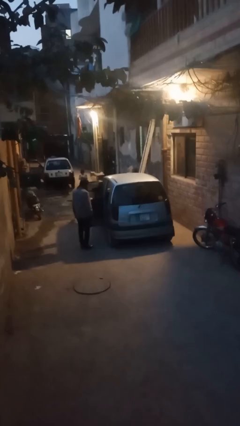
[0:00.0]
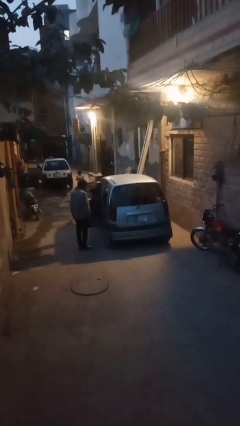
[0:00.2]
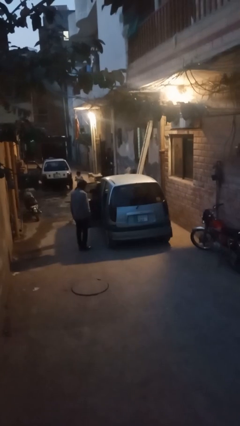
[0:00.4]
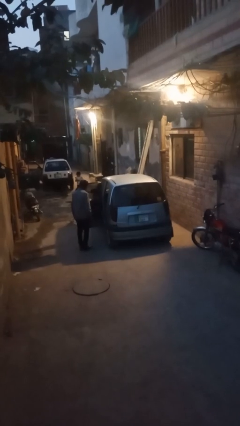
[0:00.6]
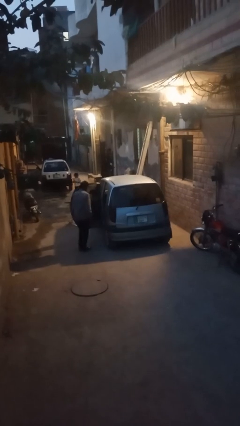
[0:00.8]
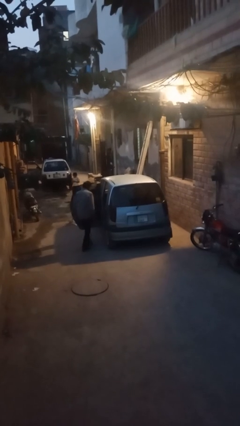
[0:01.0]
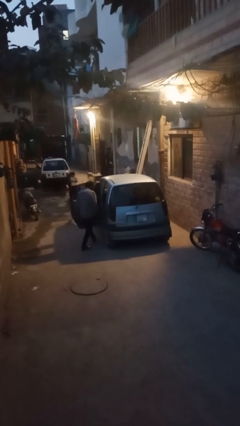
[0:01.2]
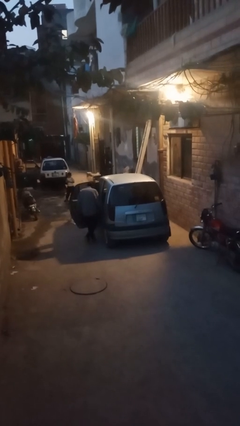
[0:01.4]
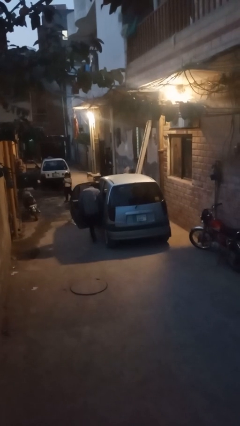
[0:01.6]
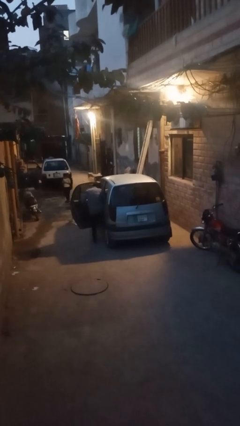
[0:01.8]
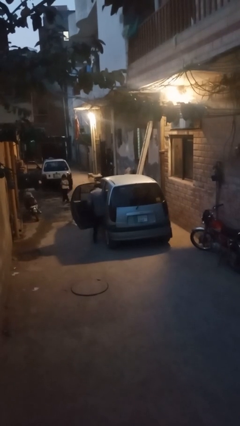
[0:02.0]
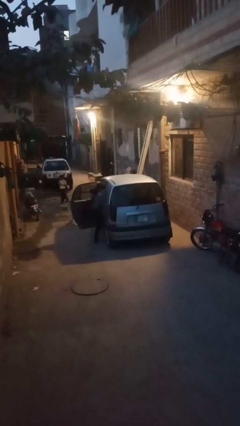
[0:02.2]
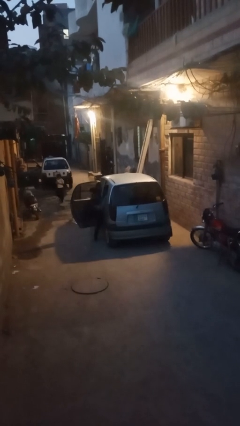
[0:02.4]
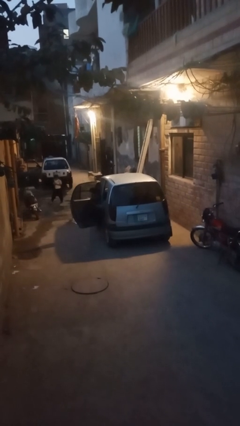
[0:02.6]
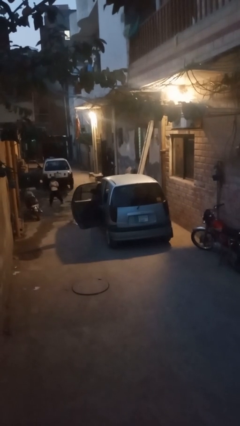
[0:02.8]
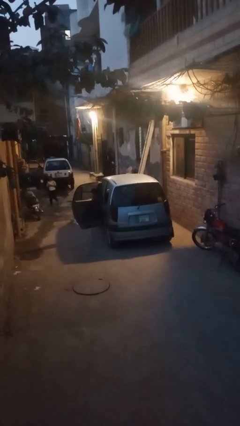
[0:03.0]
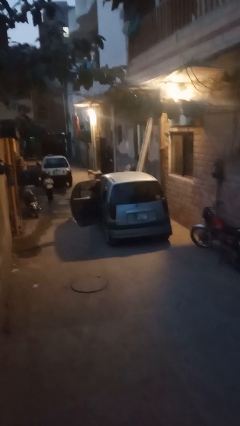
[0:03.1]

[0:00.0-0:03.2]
person enters car

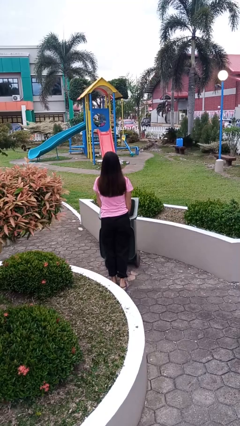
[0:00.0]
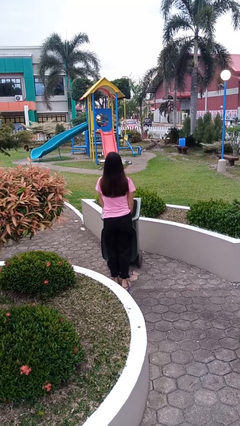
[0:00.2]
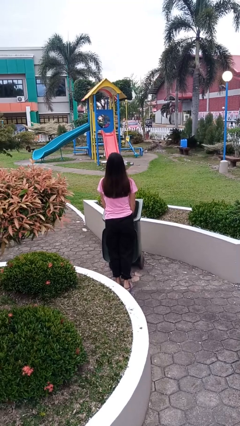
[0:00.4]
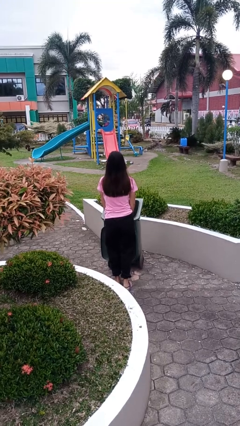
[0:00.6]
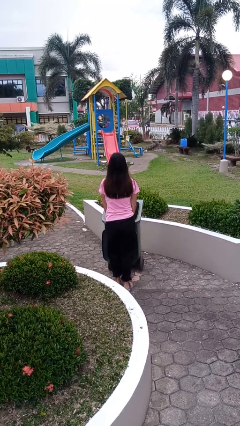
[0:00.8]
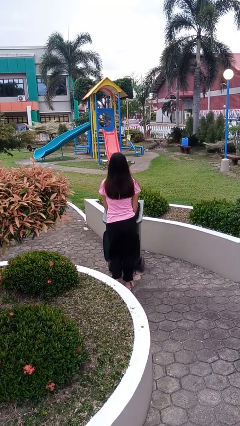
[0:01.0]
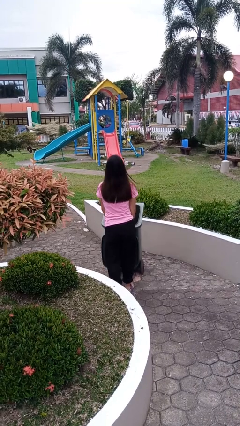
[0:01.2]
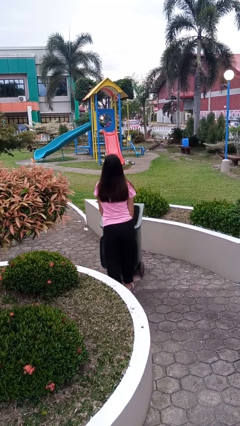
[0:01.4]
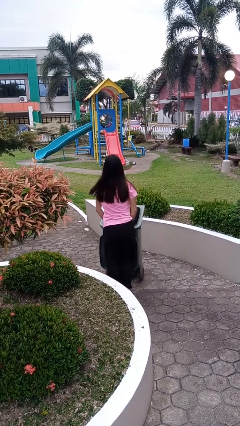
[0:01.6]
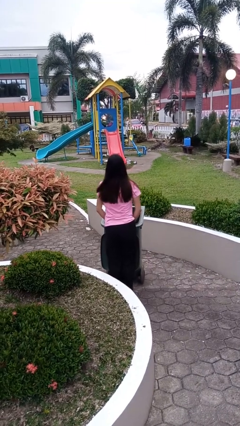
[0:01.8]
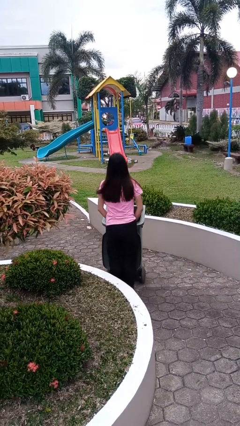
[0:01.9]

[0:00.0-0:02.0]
person pulls wheeled trashcan

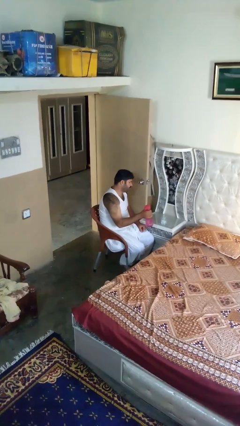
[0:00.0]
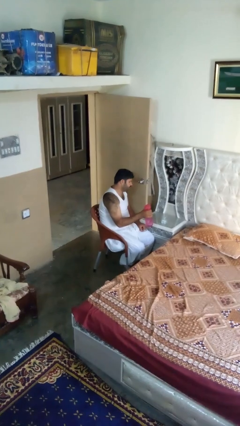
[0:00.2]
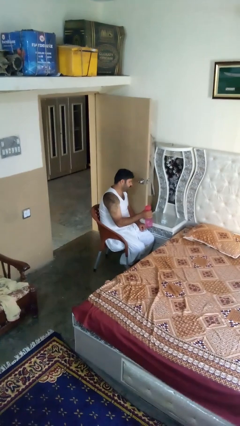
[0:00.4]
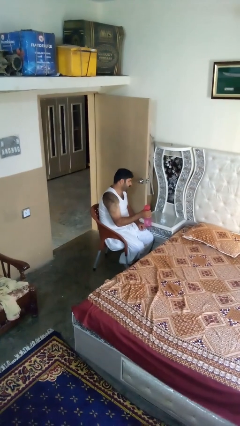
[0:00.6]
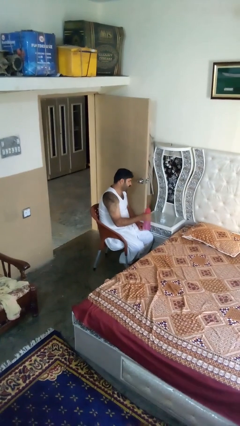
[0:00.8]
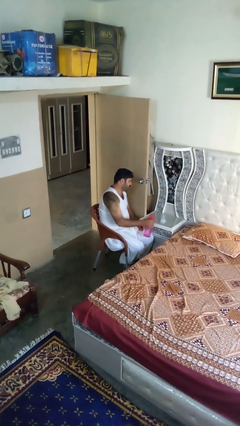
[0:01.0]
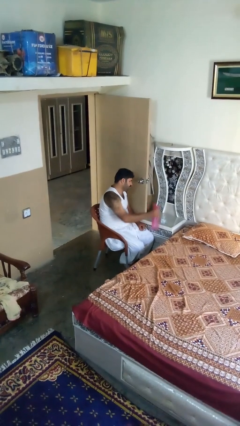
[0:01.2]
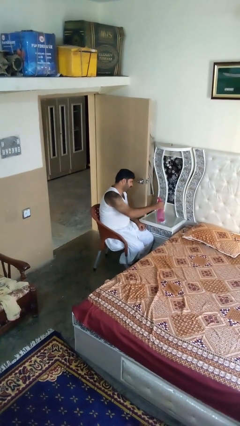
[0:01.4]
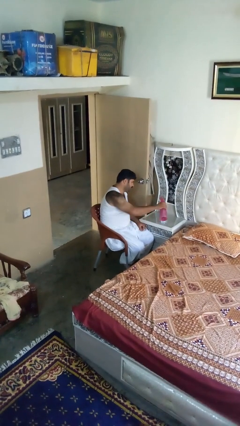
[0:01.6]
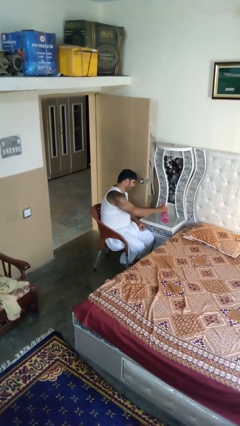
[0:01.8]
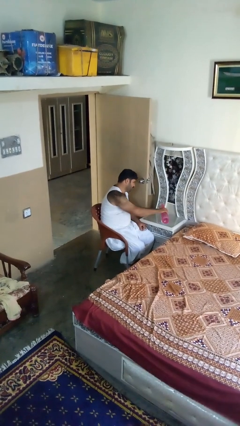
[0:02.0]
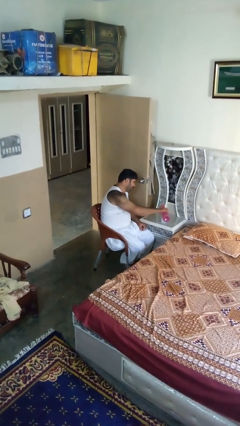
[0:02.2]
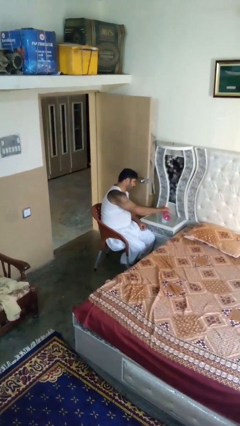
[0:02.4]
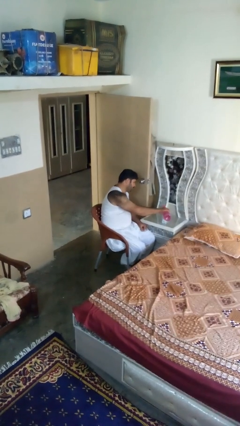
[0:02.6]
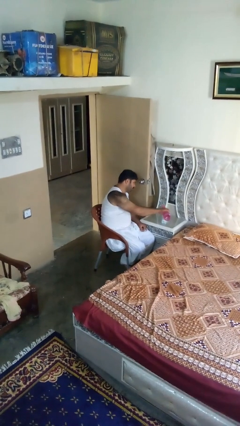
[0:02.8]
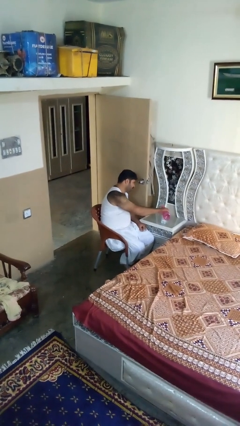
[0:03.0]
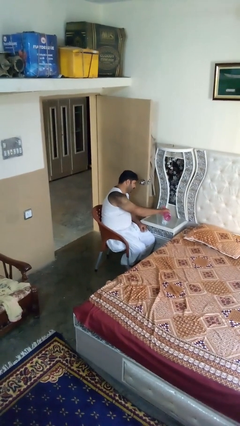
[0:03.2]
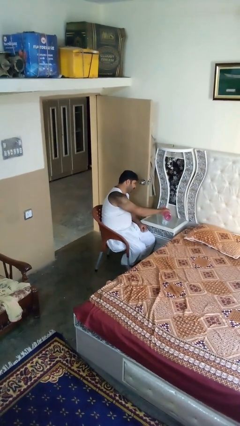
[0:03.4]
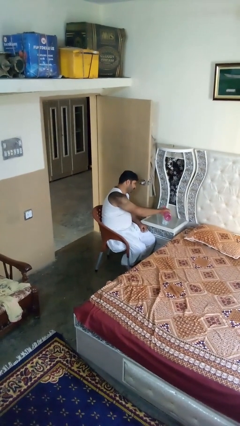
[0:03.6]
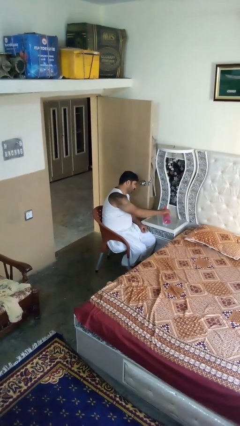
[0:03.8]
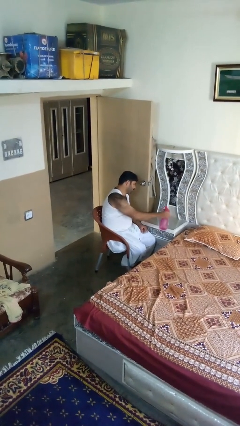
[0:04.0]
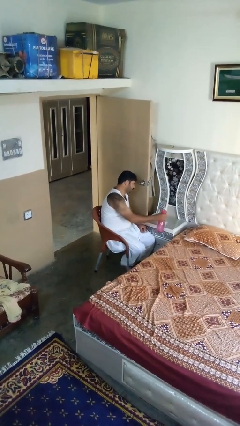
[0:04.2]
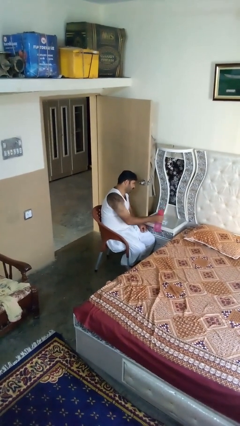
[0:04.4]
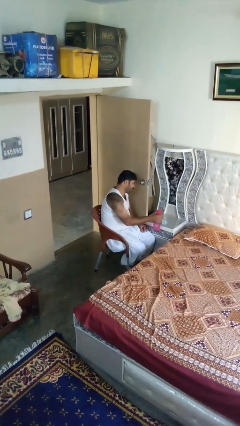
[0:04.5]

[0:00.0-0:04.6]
person pours liquid into cup

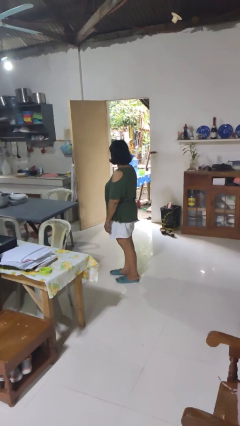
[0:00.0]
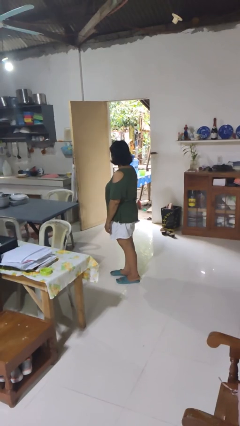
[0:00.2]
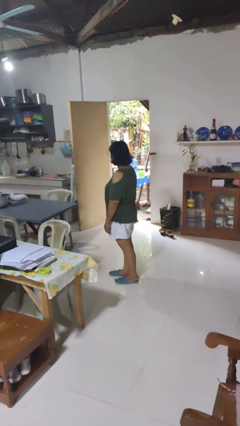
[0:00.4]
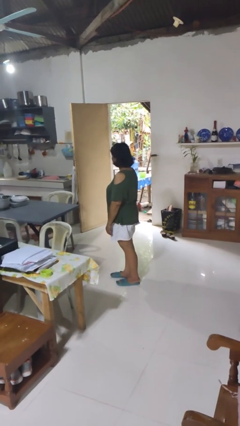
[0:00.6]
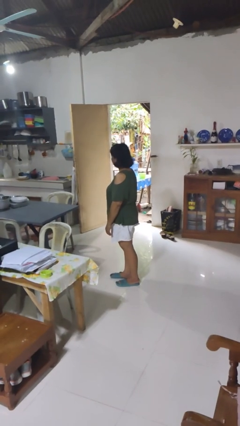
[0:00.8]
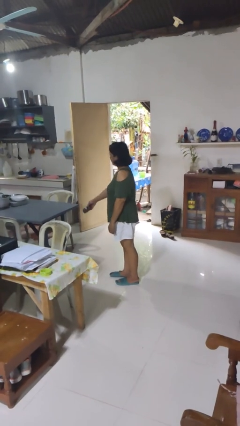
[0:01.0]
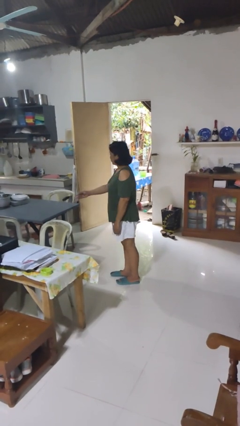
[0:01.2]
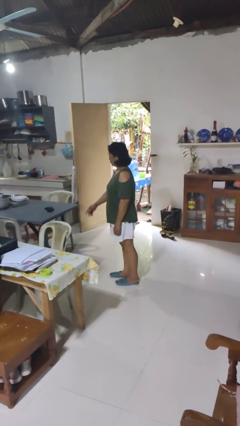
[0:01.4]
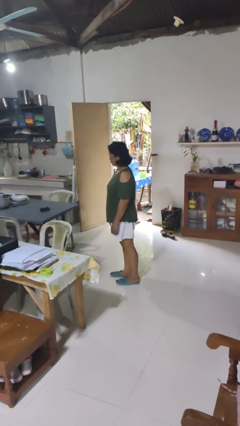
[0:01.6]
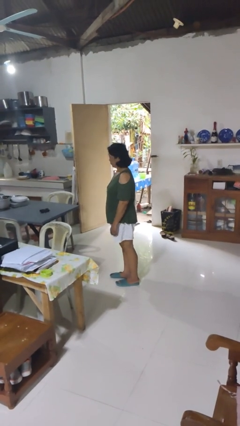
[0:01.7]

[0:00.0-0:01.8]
person throws object on table

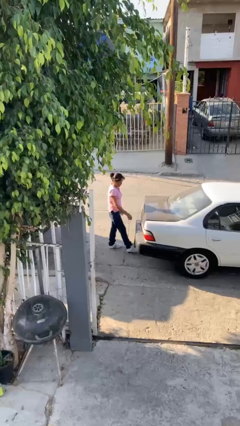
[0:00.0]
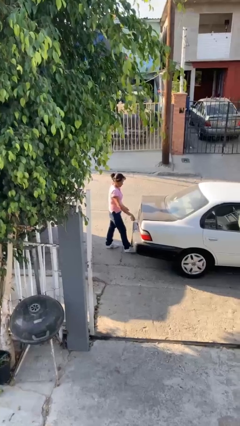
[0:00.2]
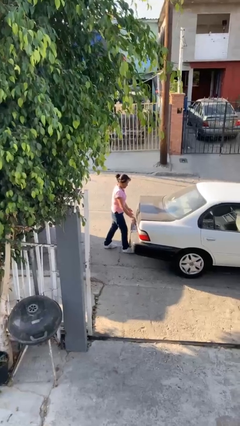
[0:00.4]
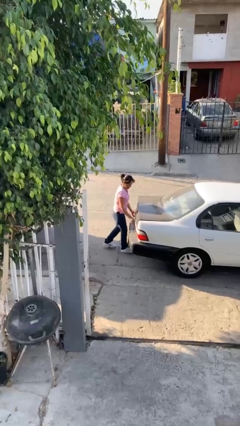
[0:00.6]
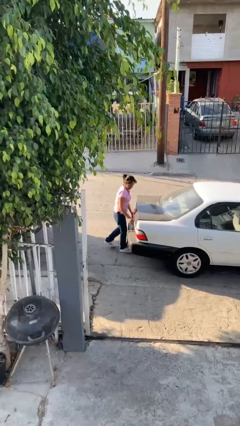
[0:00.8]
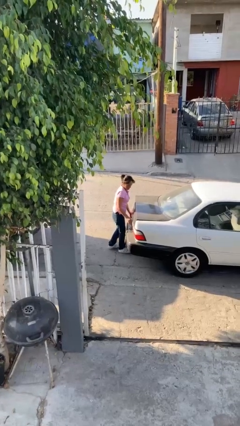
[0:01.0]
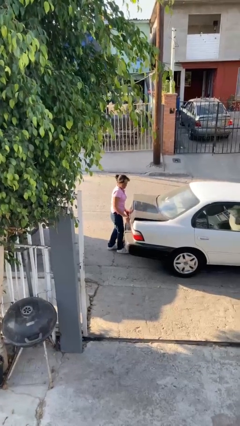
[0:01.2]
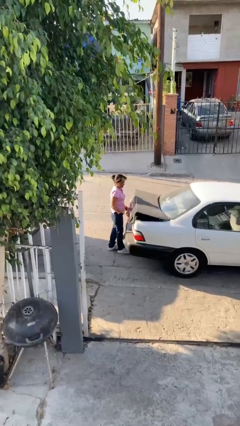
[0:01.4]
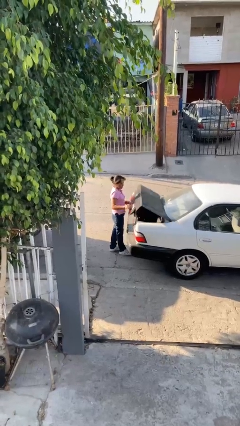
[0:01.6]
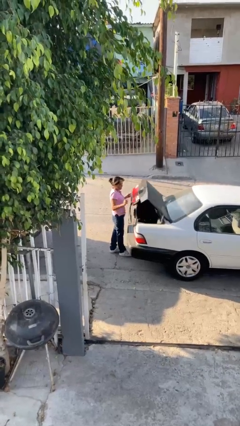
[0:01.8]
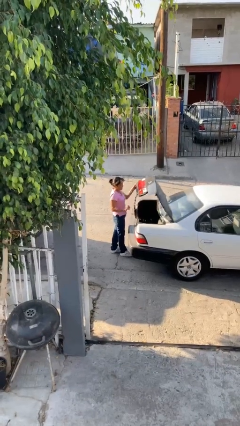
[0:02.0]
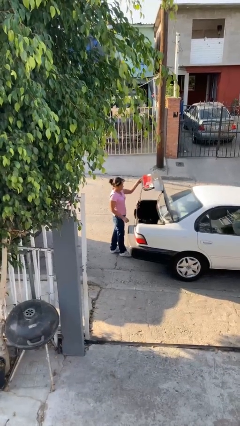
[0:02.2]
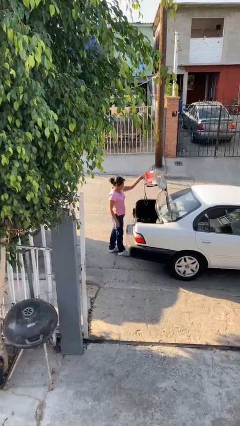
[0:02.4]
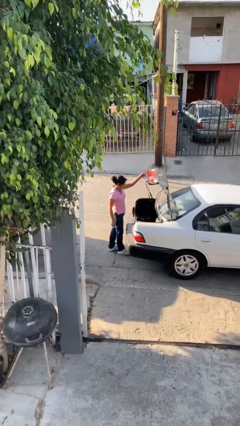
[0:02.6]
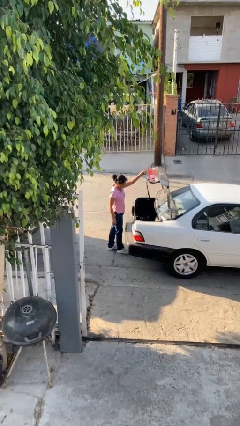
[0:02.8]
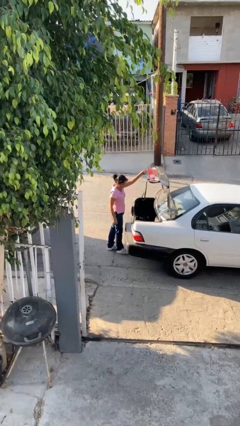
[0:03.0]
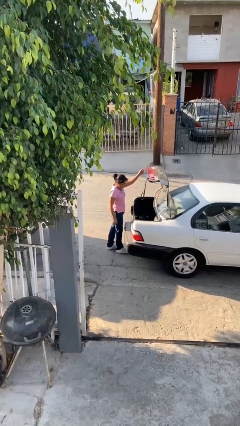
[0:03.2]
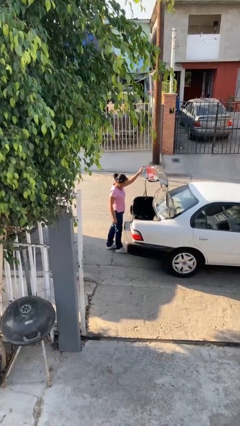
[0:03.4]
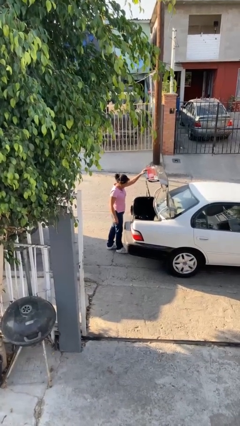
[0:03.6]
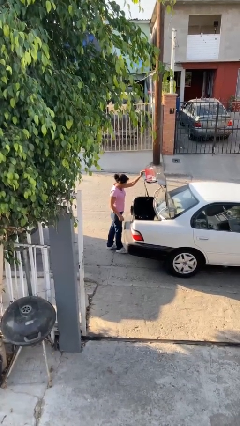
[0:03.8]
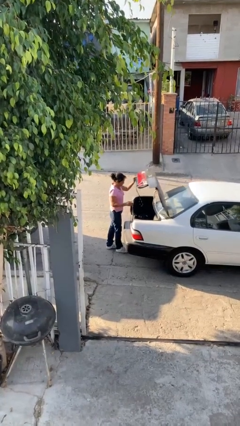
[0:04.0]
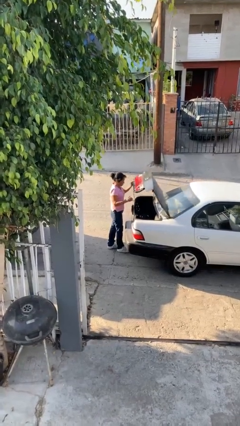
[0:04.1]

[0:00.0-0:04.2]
person opens car trunk

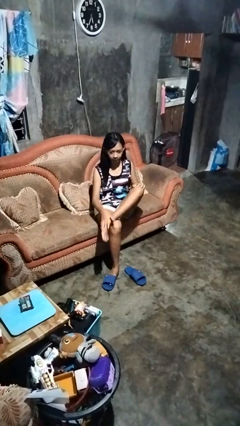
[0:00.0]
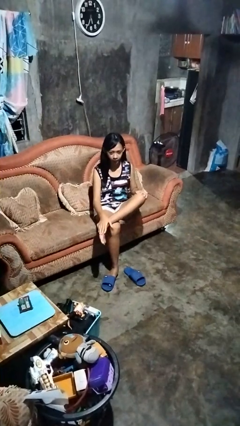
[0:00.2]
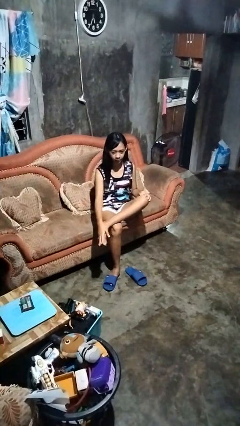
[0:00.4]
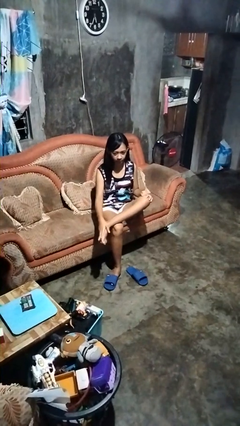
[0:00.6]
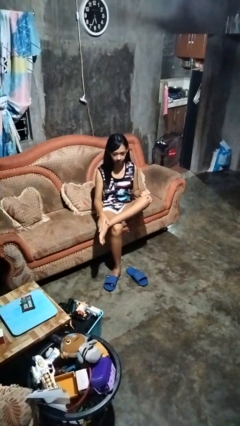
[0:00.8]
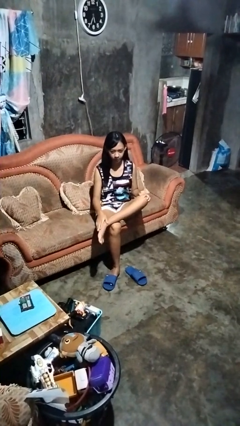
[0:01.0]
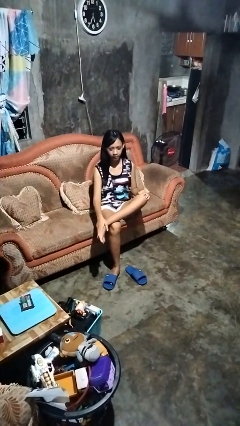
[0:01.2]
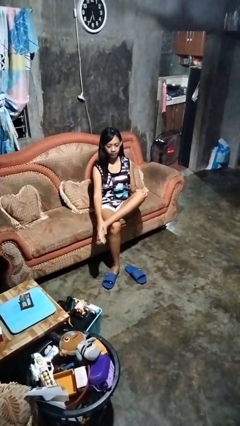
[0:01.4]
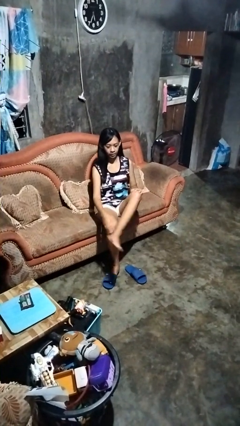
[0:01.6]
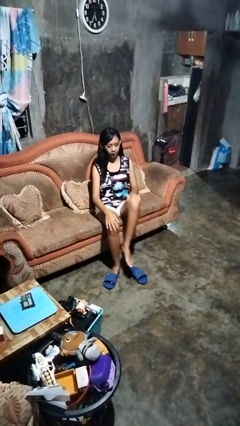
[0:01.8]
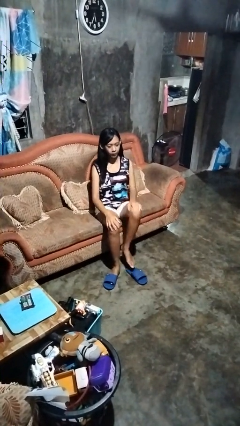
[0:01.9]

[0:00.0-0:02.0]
person rubs foot
